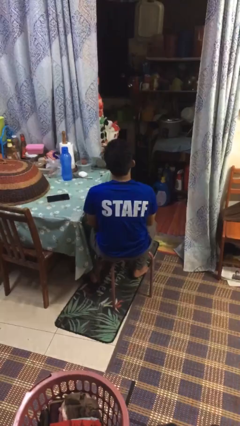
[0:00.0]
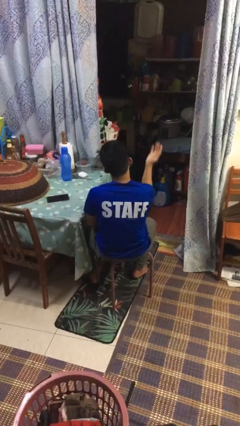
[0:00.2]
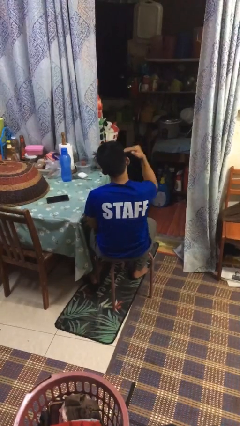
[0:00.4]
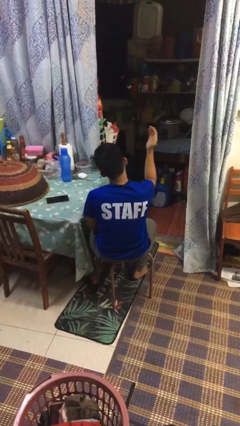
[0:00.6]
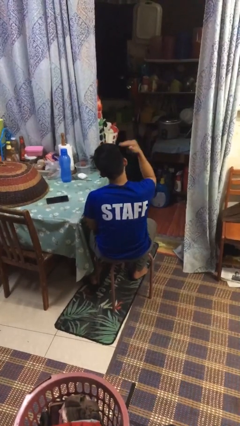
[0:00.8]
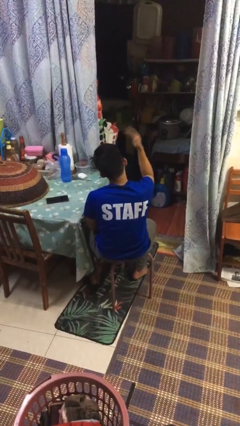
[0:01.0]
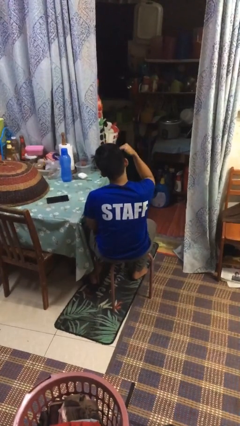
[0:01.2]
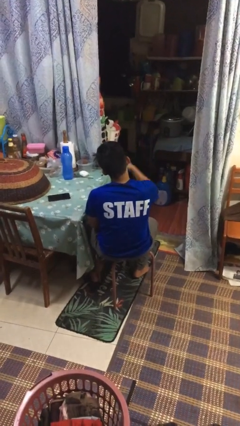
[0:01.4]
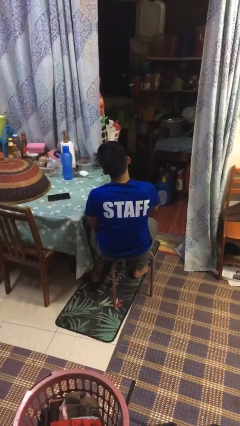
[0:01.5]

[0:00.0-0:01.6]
person gestures come here

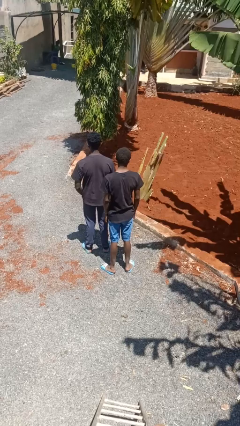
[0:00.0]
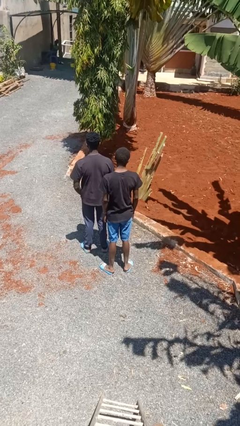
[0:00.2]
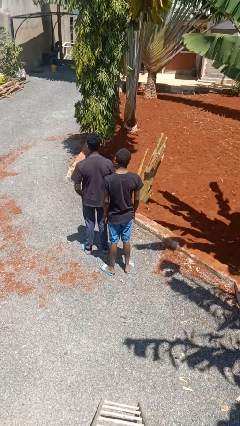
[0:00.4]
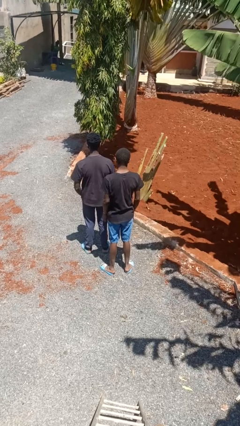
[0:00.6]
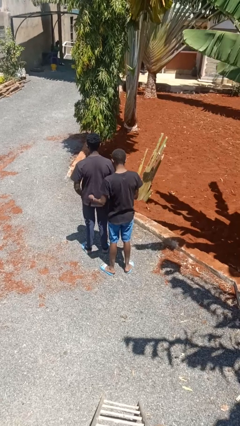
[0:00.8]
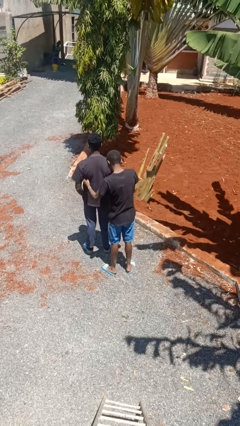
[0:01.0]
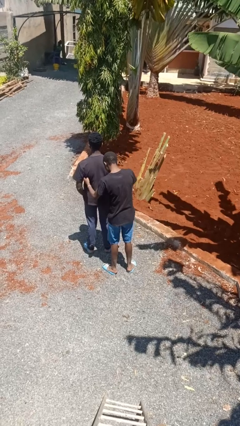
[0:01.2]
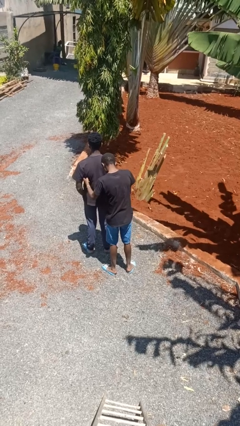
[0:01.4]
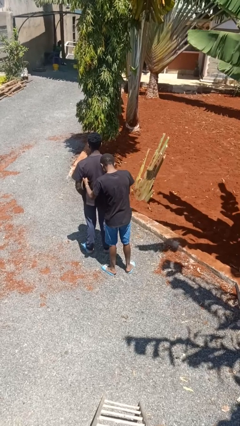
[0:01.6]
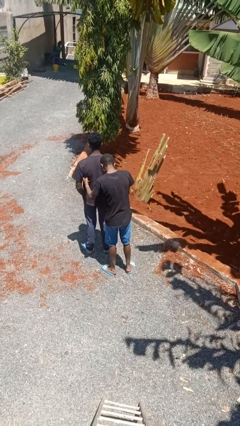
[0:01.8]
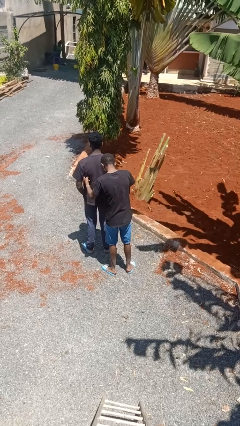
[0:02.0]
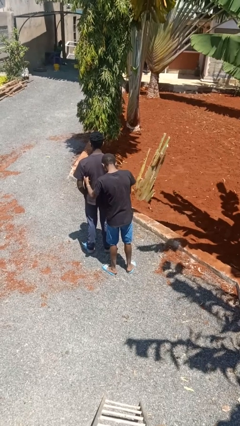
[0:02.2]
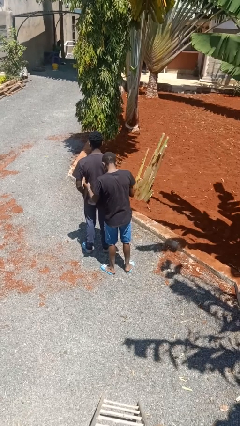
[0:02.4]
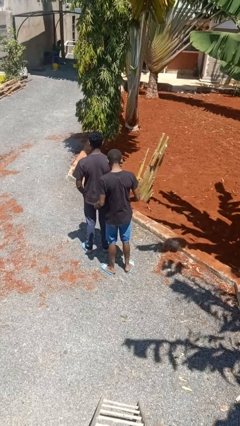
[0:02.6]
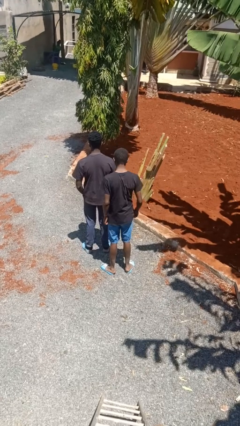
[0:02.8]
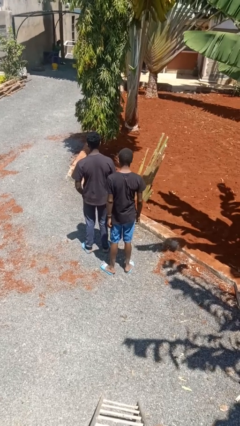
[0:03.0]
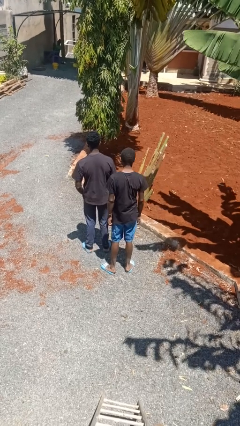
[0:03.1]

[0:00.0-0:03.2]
person tickles person

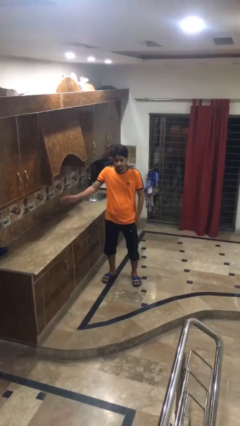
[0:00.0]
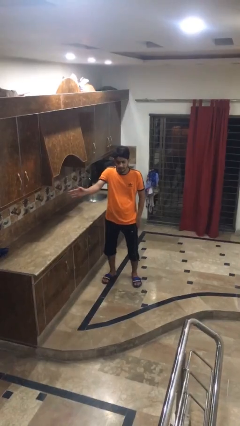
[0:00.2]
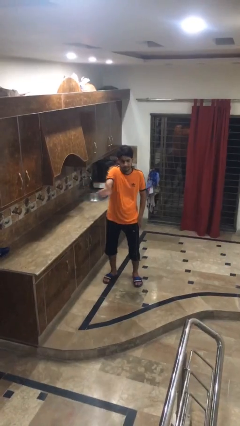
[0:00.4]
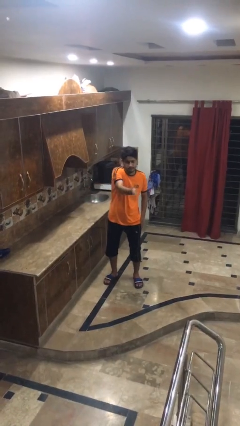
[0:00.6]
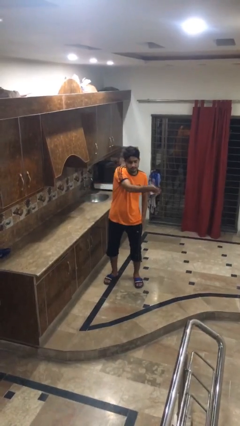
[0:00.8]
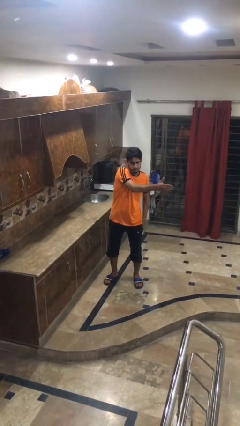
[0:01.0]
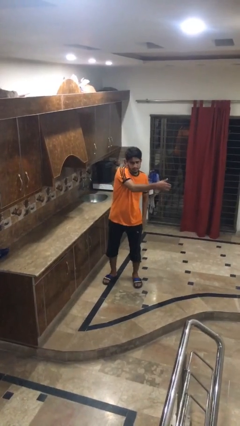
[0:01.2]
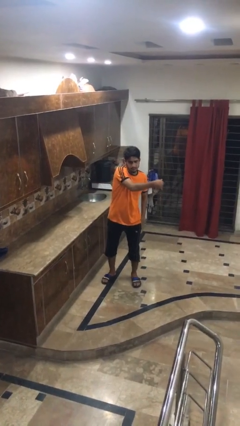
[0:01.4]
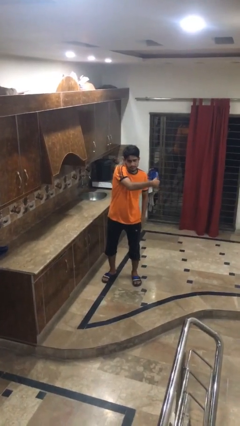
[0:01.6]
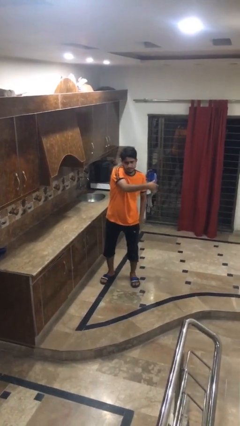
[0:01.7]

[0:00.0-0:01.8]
person gestures swipe left

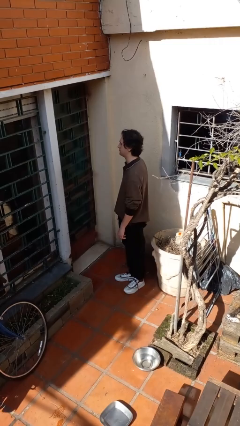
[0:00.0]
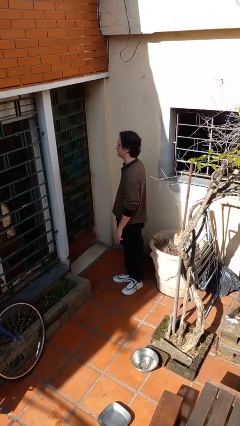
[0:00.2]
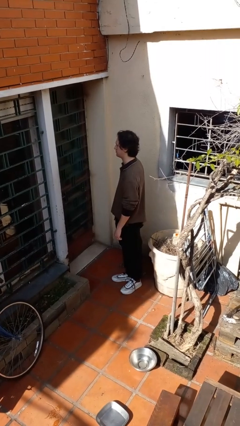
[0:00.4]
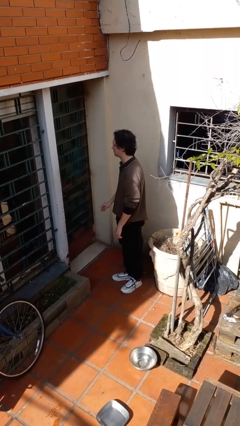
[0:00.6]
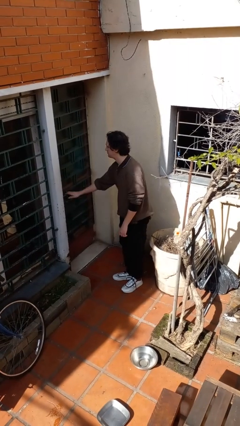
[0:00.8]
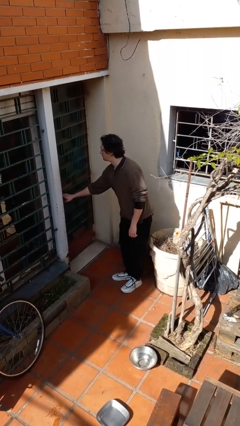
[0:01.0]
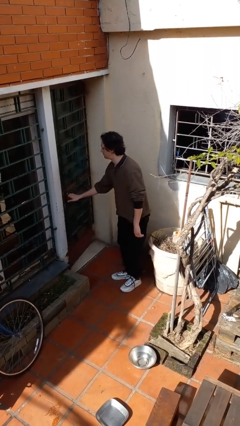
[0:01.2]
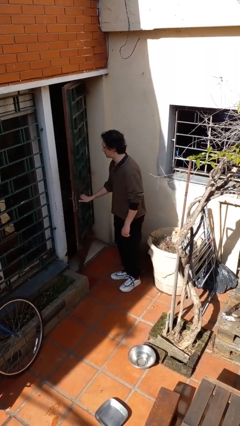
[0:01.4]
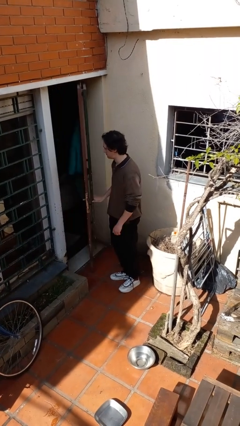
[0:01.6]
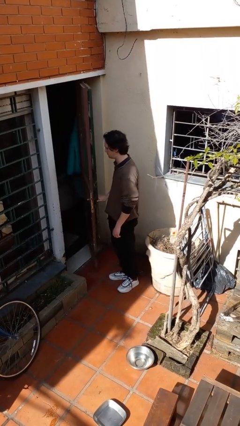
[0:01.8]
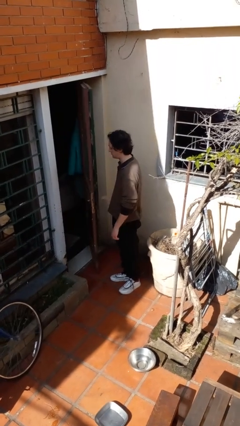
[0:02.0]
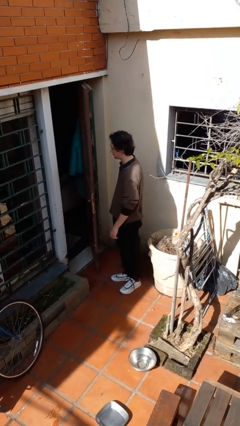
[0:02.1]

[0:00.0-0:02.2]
person opens facility door

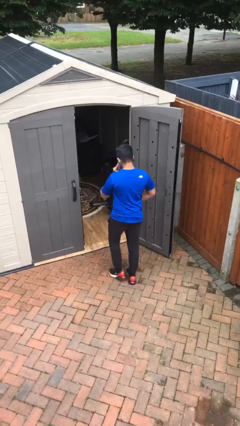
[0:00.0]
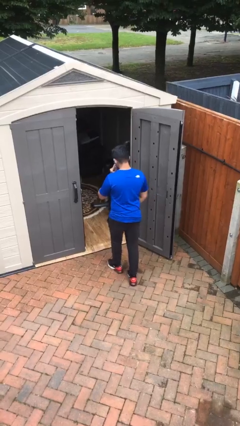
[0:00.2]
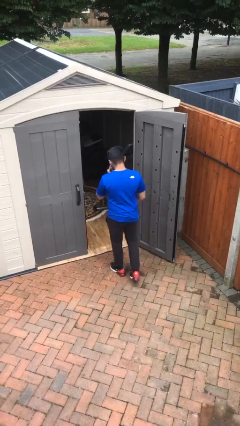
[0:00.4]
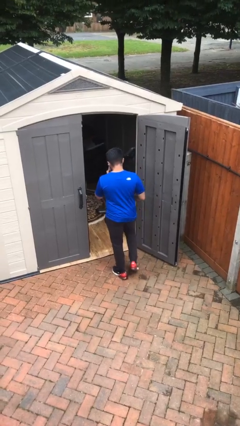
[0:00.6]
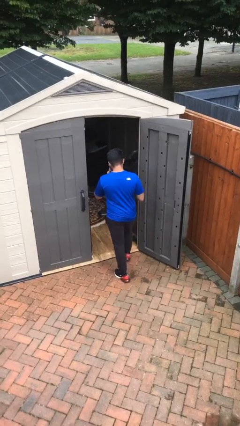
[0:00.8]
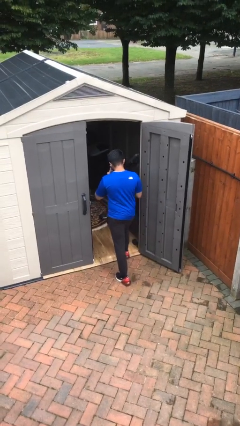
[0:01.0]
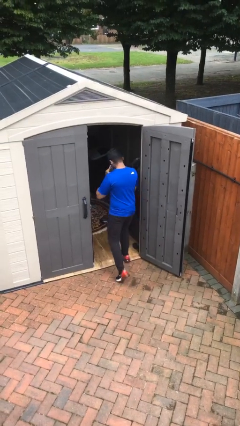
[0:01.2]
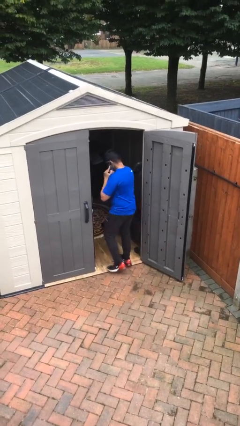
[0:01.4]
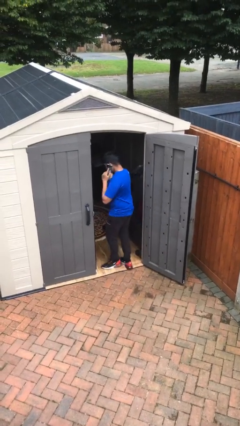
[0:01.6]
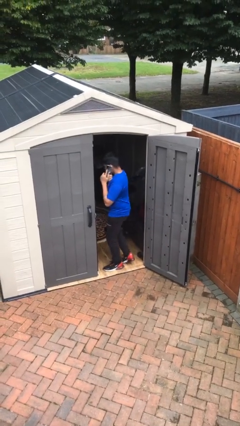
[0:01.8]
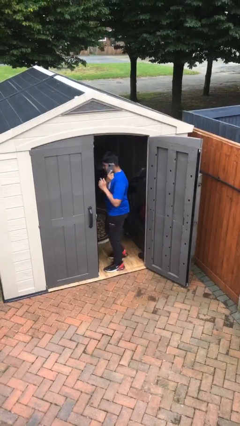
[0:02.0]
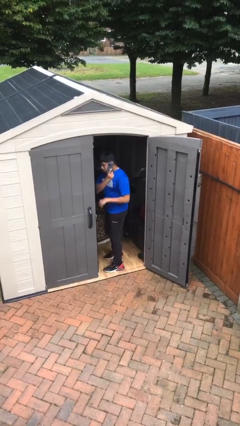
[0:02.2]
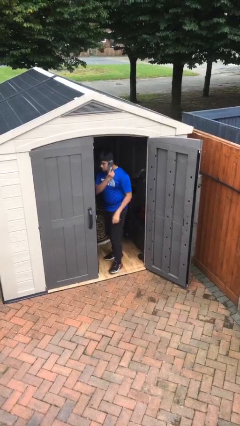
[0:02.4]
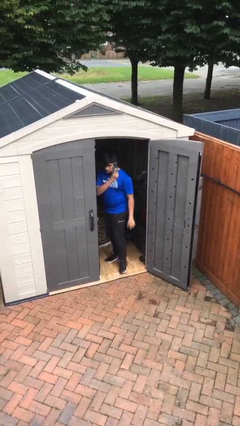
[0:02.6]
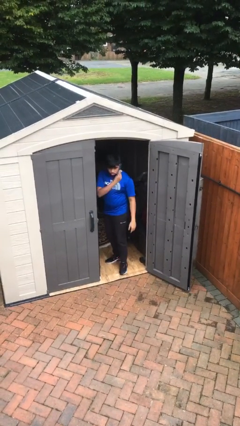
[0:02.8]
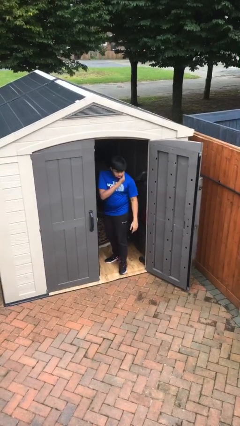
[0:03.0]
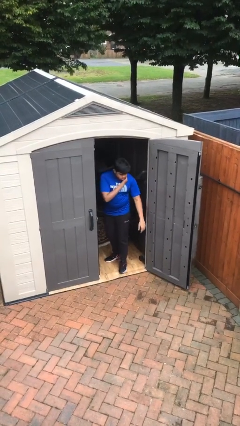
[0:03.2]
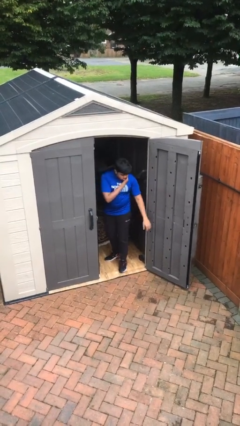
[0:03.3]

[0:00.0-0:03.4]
person exits scene through structure

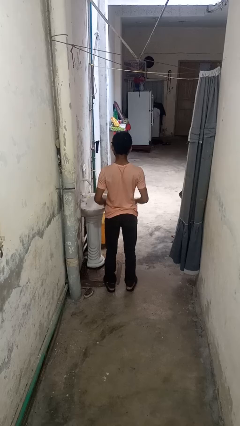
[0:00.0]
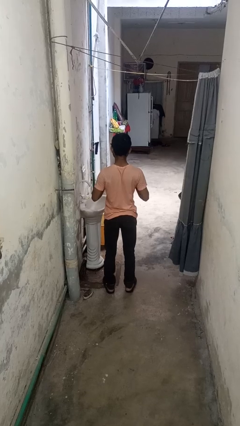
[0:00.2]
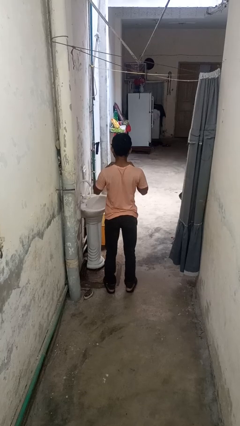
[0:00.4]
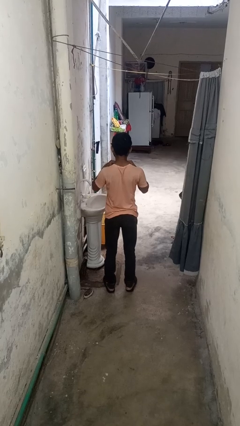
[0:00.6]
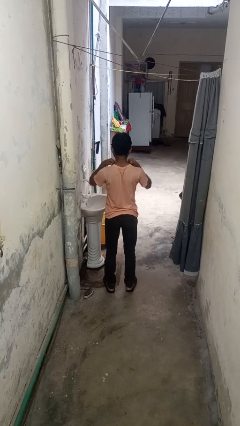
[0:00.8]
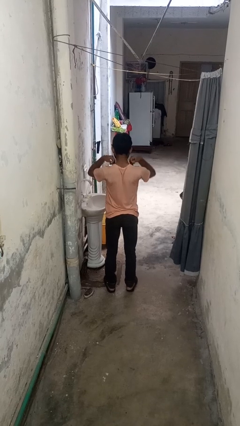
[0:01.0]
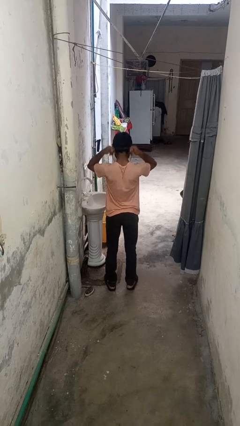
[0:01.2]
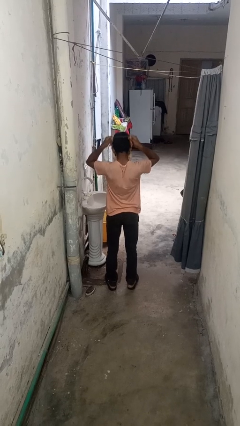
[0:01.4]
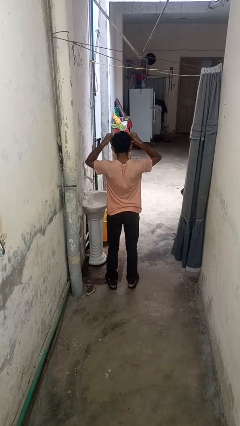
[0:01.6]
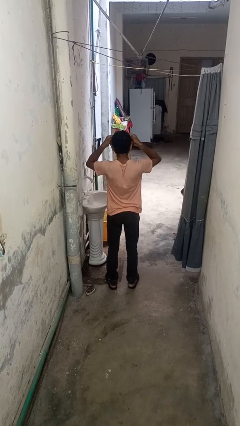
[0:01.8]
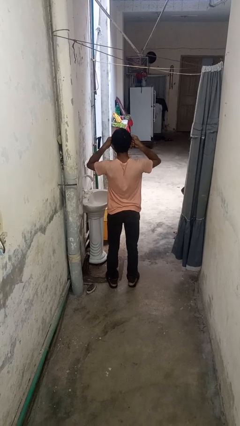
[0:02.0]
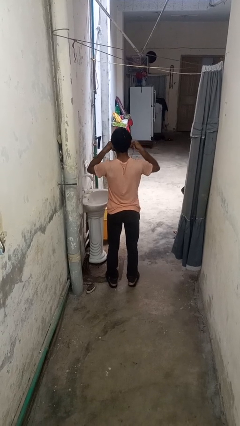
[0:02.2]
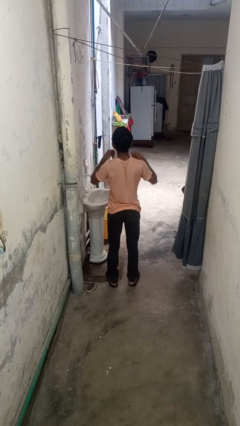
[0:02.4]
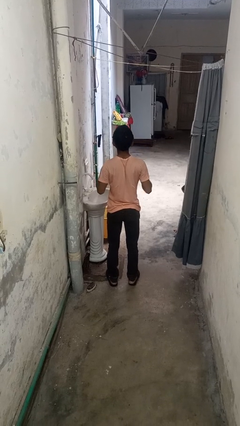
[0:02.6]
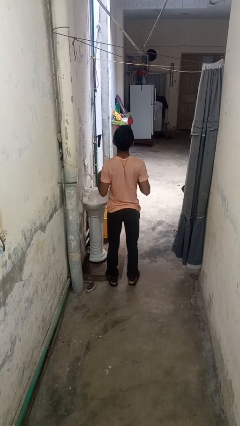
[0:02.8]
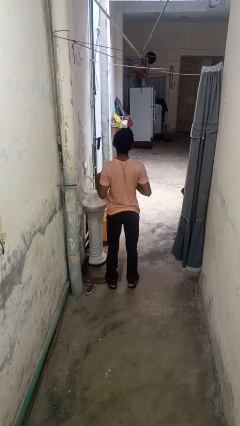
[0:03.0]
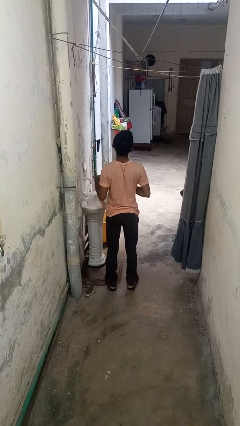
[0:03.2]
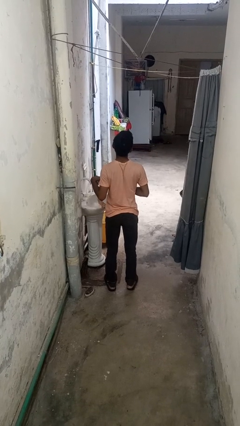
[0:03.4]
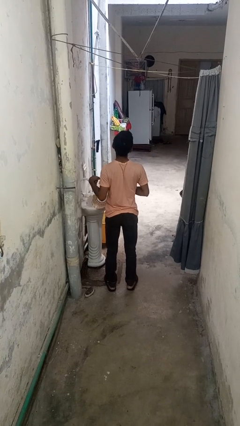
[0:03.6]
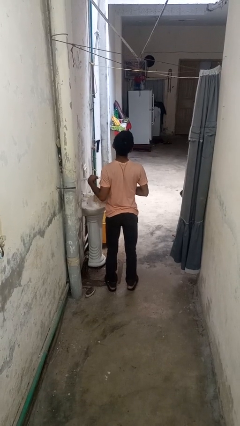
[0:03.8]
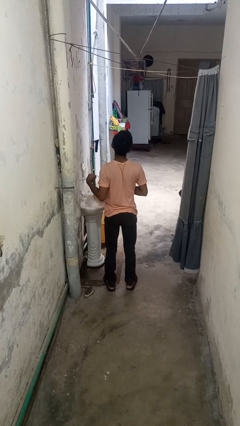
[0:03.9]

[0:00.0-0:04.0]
person takes off necklace

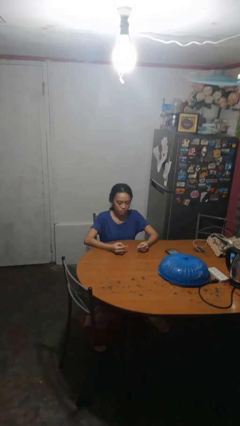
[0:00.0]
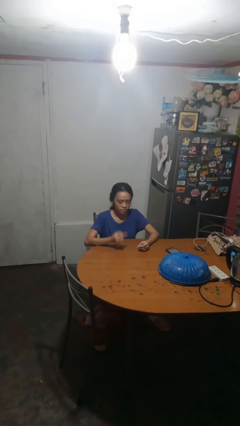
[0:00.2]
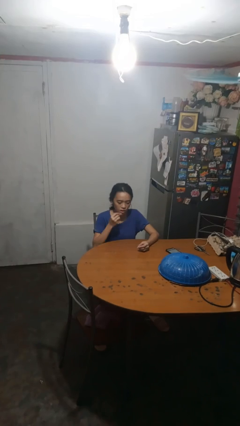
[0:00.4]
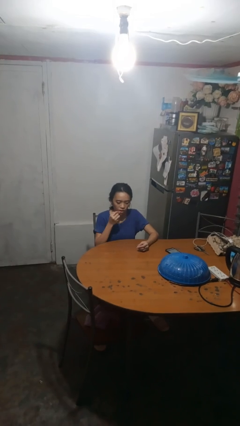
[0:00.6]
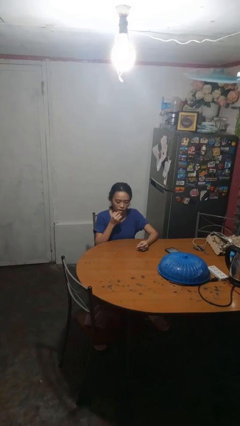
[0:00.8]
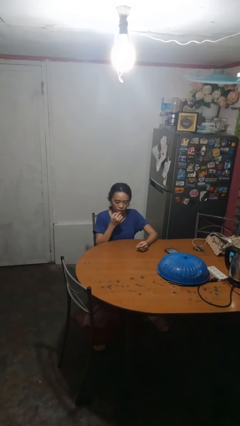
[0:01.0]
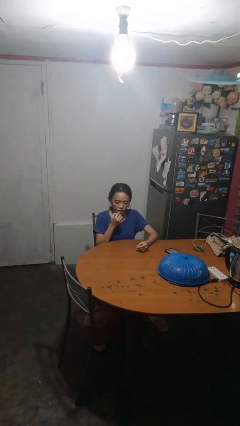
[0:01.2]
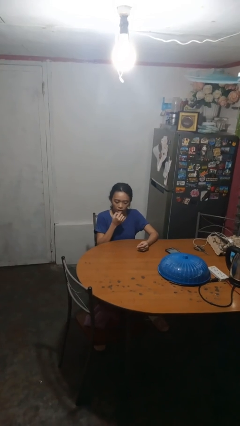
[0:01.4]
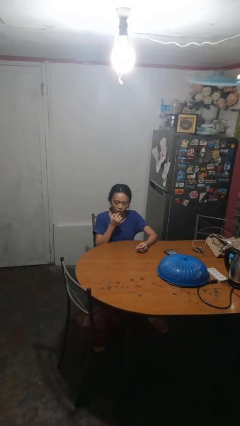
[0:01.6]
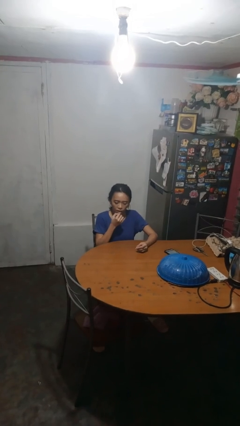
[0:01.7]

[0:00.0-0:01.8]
person applies lip makeup
